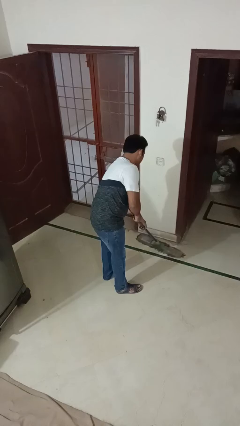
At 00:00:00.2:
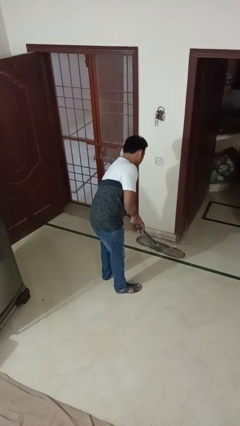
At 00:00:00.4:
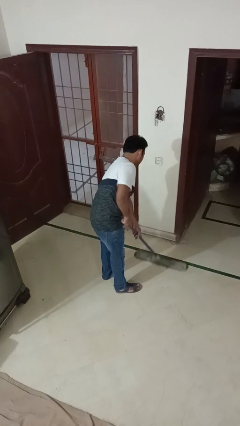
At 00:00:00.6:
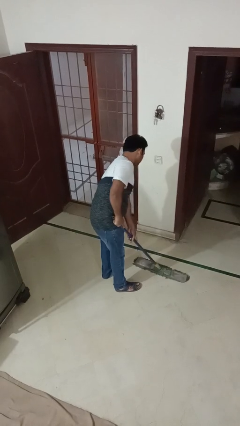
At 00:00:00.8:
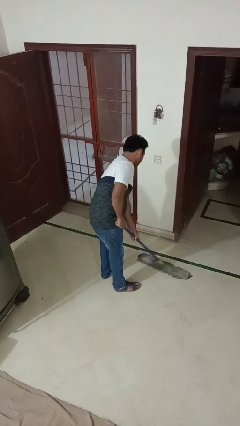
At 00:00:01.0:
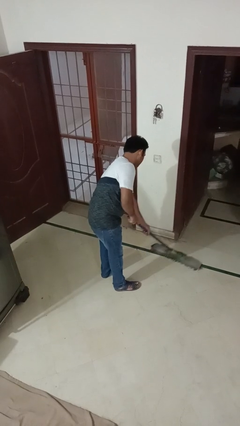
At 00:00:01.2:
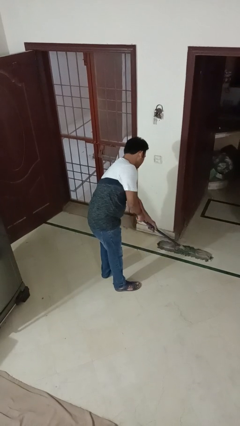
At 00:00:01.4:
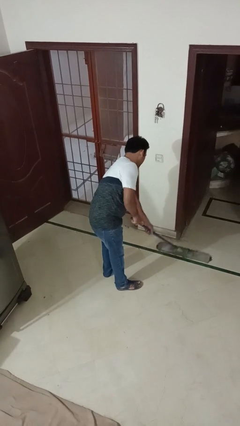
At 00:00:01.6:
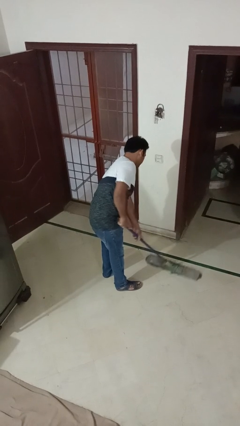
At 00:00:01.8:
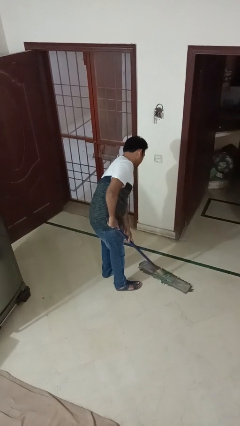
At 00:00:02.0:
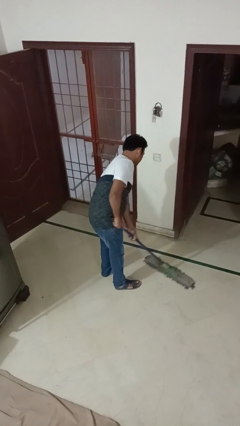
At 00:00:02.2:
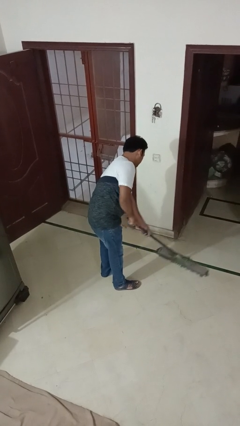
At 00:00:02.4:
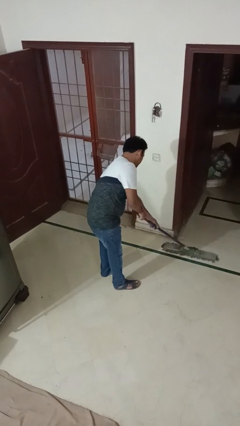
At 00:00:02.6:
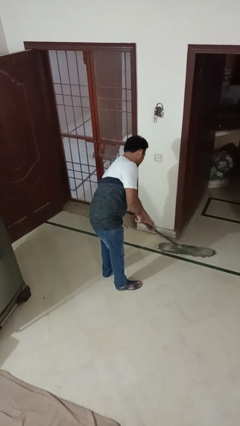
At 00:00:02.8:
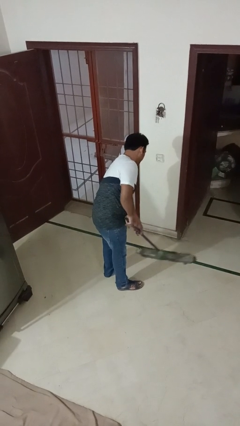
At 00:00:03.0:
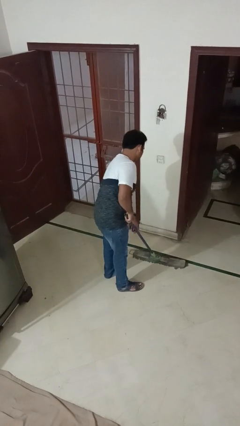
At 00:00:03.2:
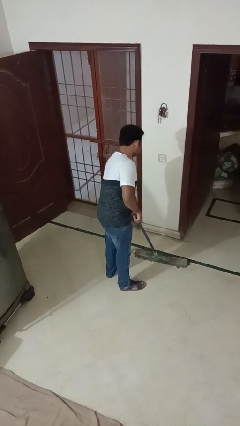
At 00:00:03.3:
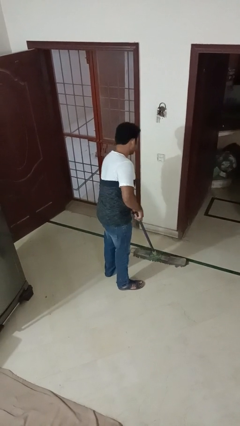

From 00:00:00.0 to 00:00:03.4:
person mops

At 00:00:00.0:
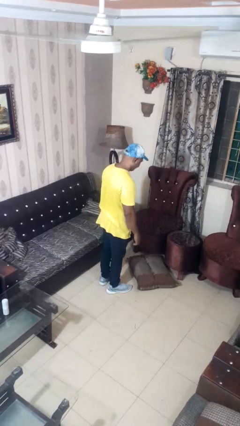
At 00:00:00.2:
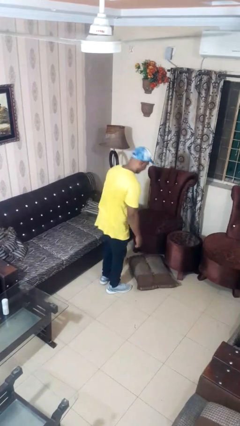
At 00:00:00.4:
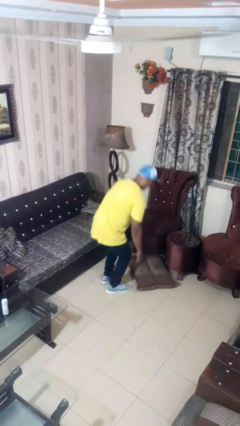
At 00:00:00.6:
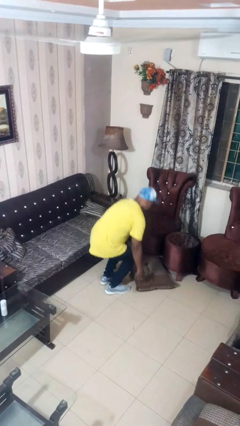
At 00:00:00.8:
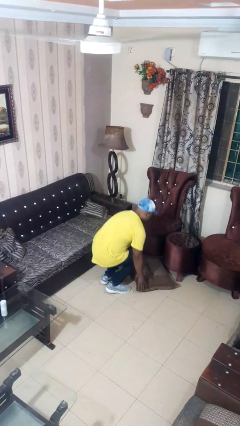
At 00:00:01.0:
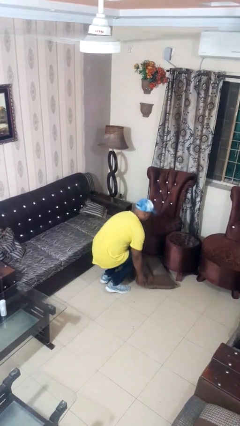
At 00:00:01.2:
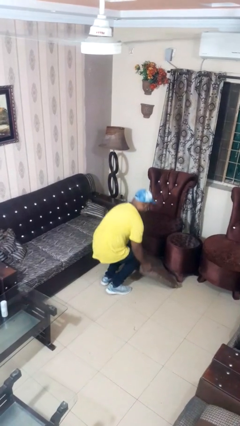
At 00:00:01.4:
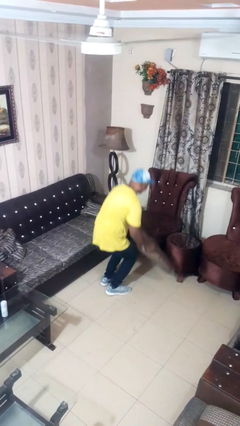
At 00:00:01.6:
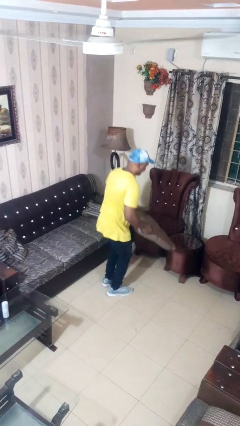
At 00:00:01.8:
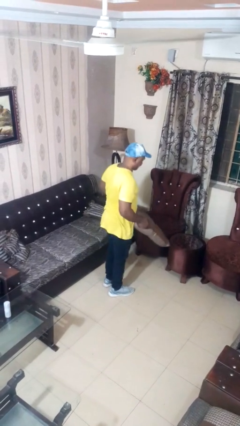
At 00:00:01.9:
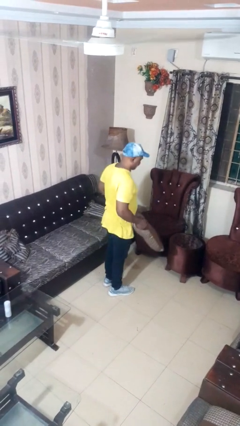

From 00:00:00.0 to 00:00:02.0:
person picks up object from floor

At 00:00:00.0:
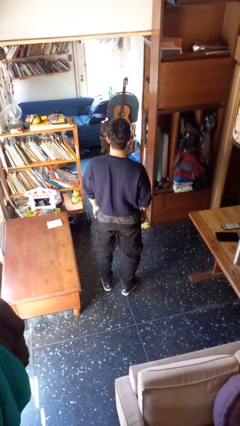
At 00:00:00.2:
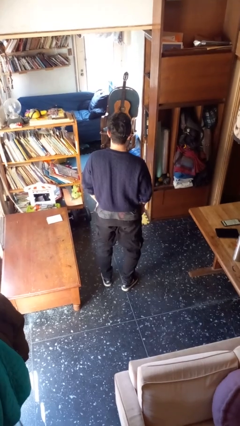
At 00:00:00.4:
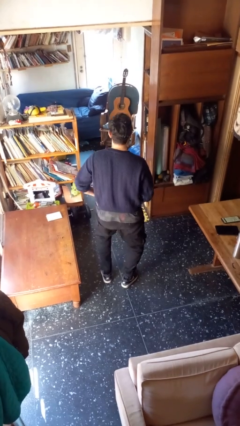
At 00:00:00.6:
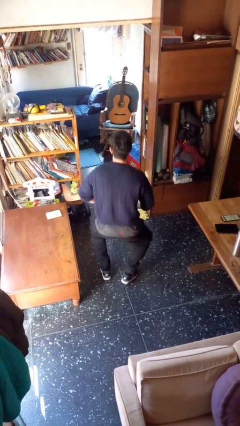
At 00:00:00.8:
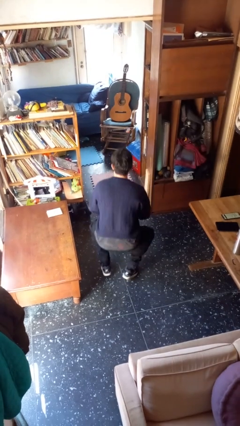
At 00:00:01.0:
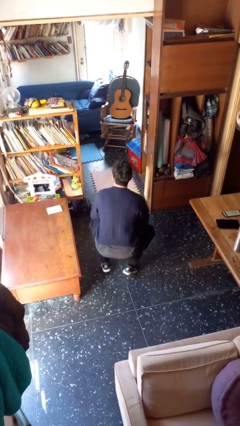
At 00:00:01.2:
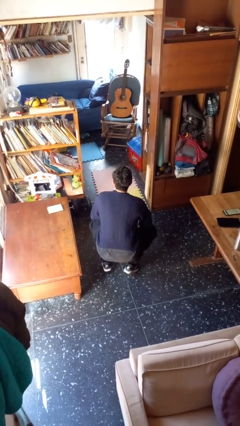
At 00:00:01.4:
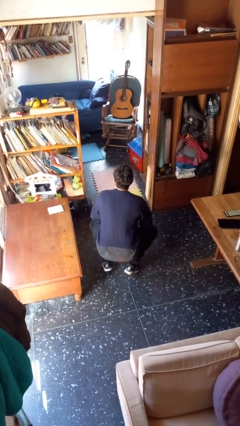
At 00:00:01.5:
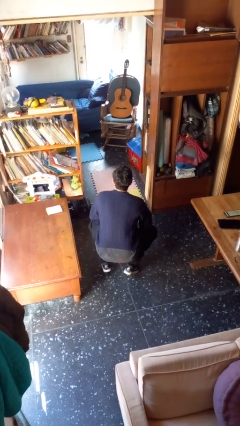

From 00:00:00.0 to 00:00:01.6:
person squats

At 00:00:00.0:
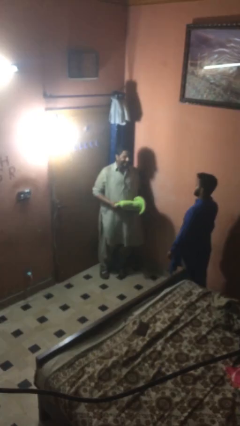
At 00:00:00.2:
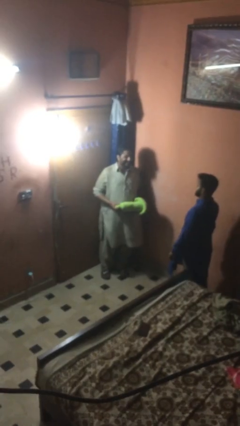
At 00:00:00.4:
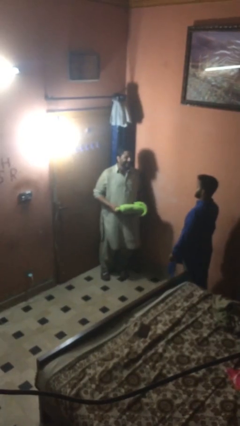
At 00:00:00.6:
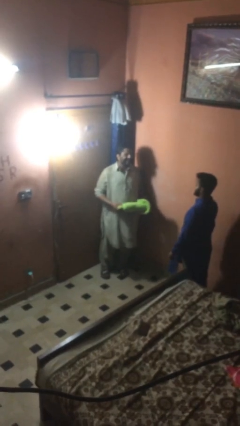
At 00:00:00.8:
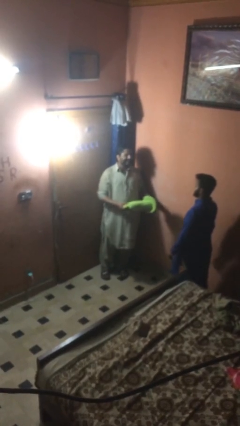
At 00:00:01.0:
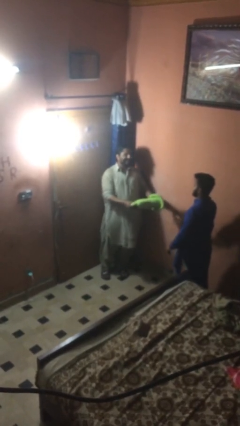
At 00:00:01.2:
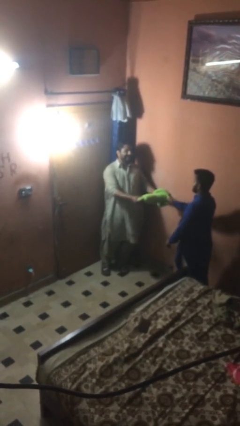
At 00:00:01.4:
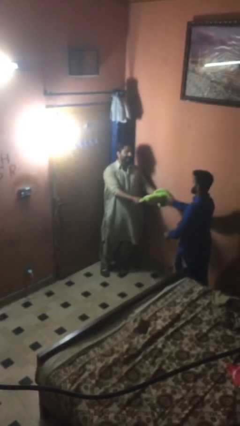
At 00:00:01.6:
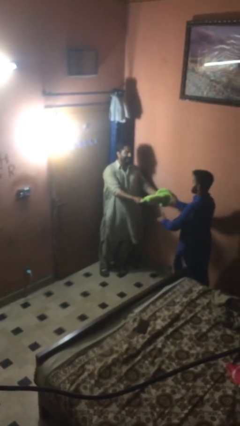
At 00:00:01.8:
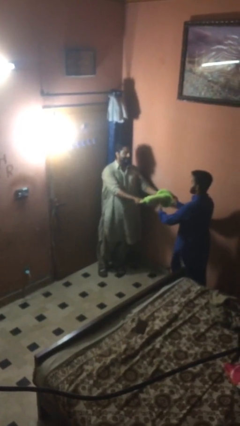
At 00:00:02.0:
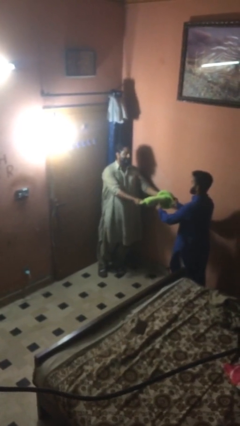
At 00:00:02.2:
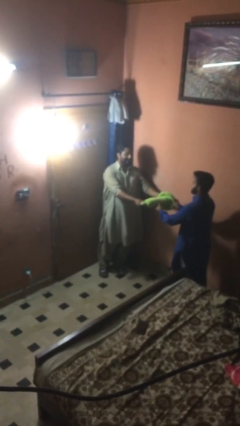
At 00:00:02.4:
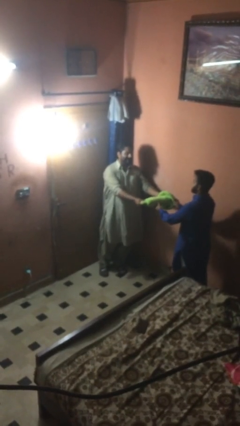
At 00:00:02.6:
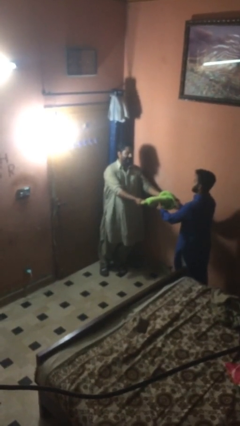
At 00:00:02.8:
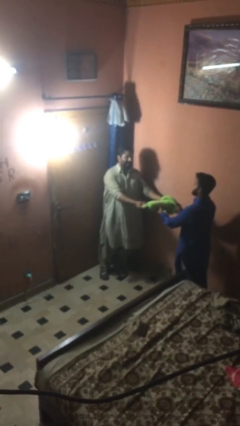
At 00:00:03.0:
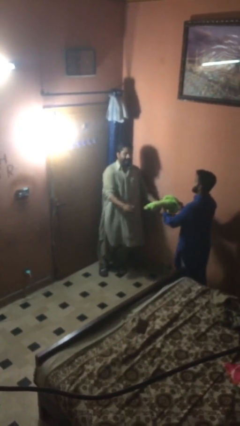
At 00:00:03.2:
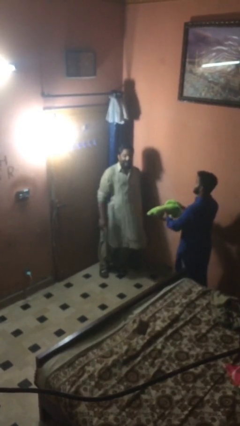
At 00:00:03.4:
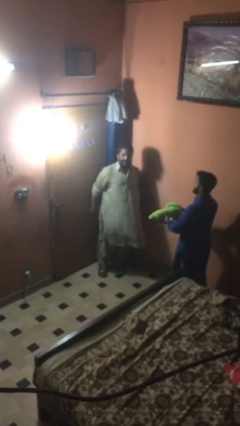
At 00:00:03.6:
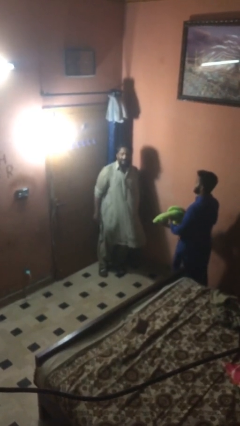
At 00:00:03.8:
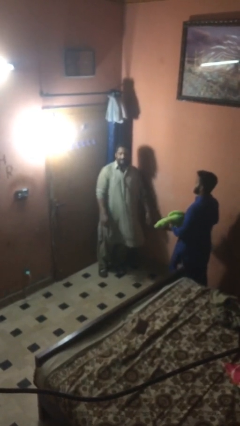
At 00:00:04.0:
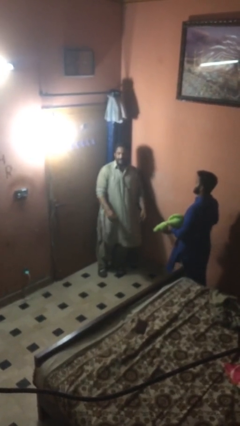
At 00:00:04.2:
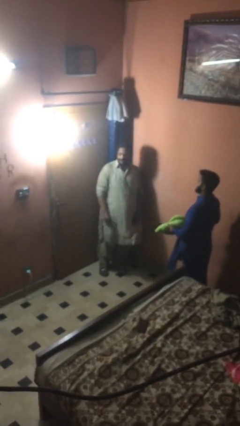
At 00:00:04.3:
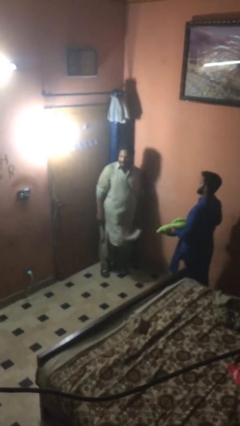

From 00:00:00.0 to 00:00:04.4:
person transfers object to person

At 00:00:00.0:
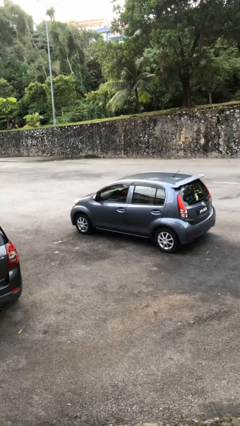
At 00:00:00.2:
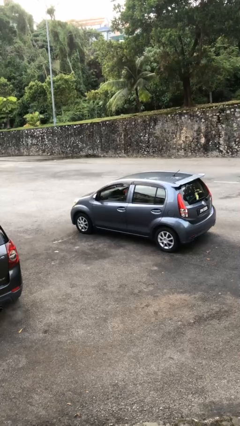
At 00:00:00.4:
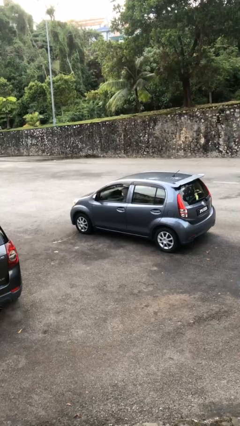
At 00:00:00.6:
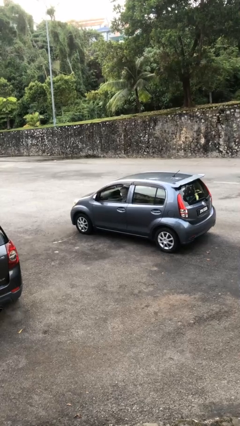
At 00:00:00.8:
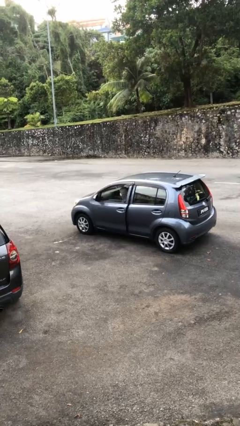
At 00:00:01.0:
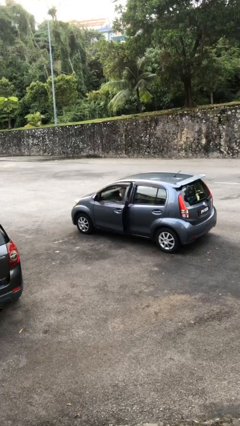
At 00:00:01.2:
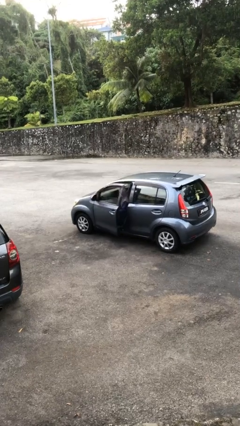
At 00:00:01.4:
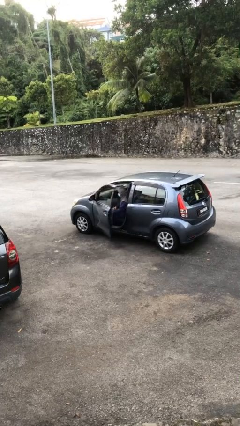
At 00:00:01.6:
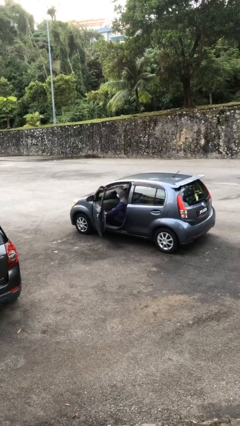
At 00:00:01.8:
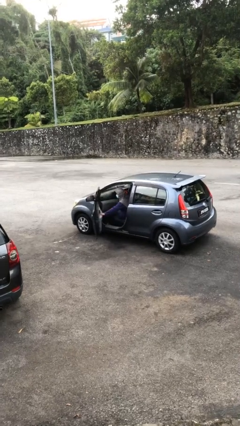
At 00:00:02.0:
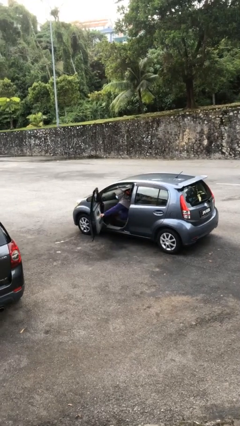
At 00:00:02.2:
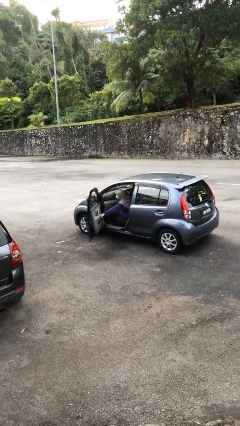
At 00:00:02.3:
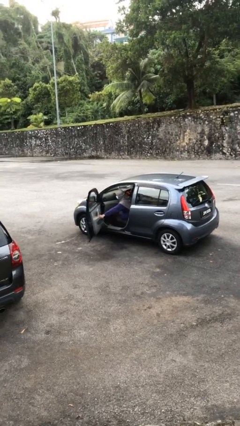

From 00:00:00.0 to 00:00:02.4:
person opens car door

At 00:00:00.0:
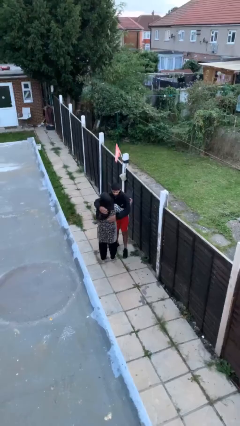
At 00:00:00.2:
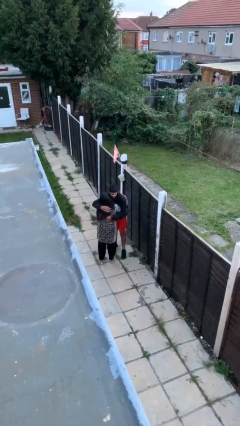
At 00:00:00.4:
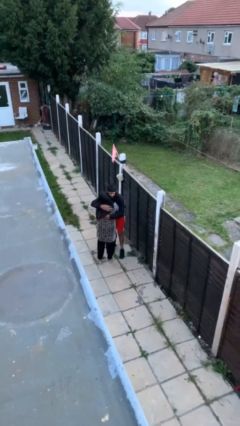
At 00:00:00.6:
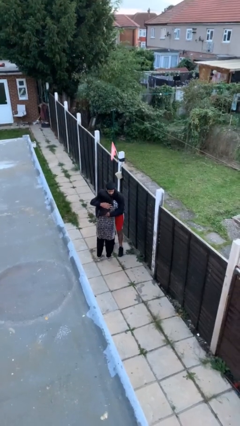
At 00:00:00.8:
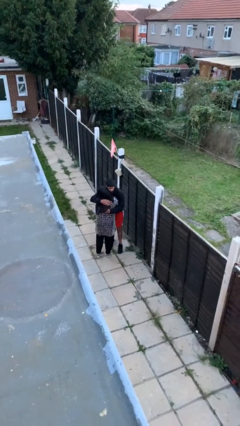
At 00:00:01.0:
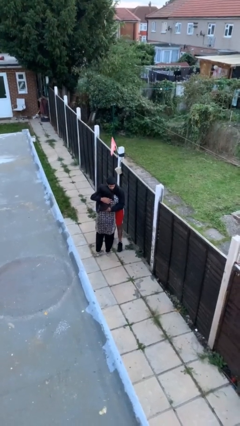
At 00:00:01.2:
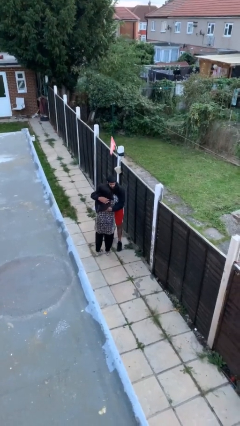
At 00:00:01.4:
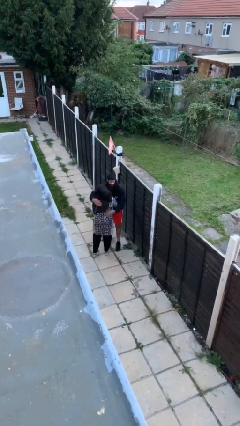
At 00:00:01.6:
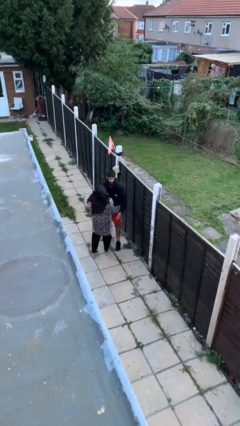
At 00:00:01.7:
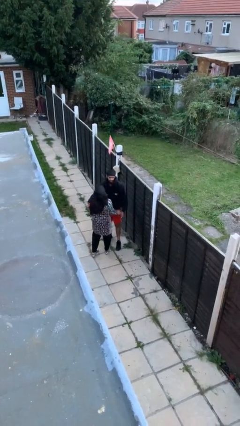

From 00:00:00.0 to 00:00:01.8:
person embraces person

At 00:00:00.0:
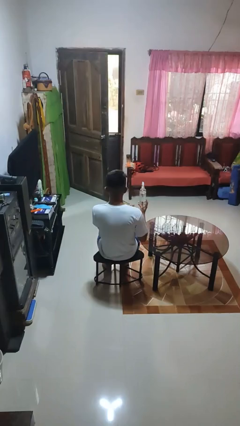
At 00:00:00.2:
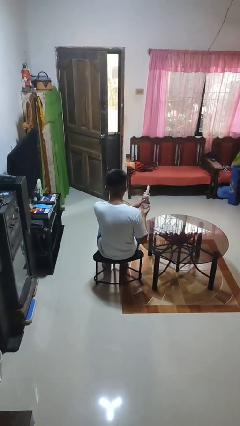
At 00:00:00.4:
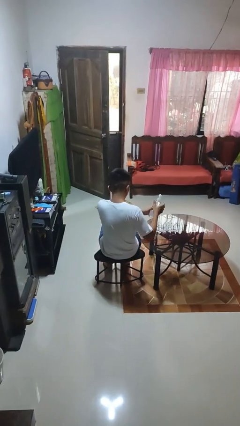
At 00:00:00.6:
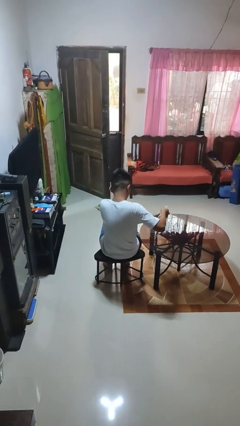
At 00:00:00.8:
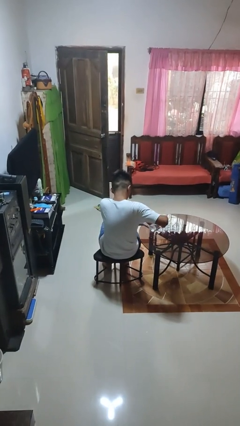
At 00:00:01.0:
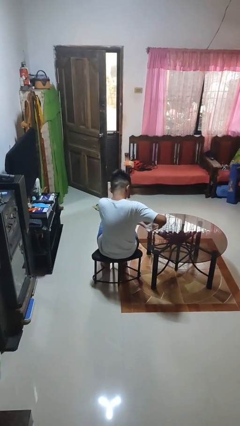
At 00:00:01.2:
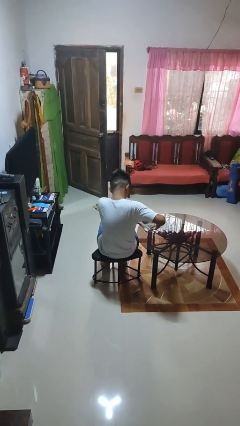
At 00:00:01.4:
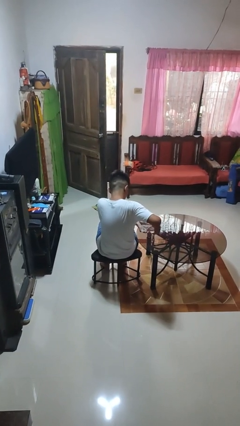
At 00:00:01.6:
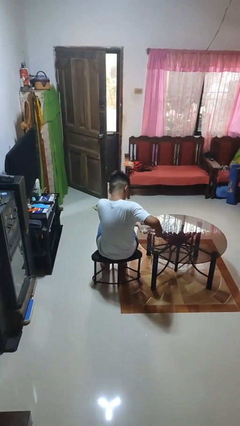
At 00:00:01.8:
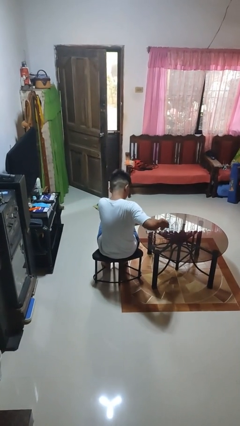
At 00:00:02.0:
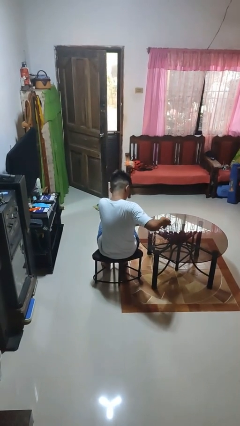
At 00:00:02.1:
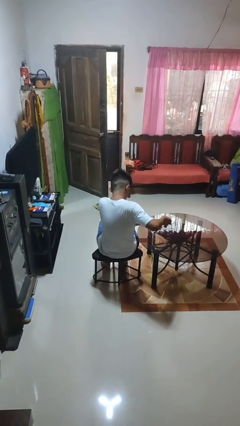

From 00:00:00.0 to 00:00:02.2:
person sprays from bottle
